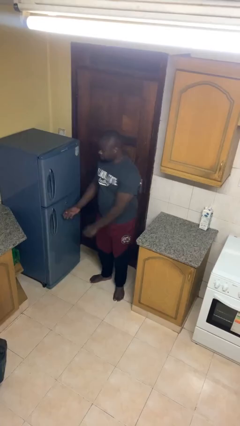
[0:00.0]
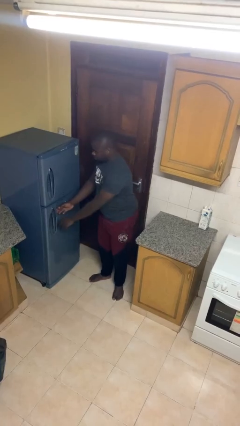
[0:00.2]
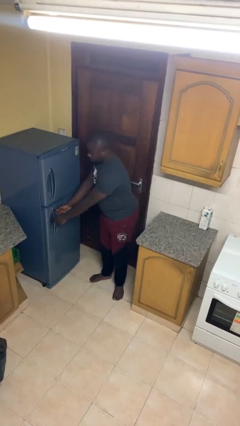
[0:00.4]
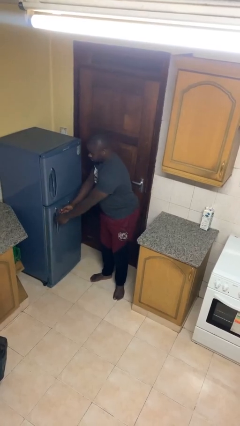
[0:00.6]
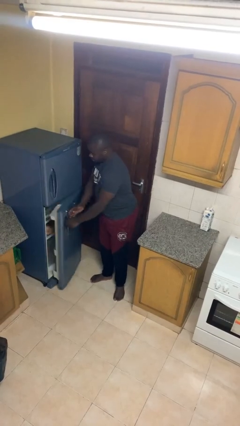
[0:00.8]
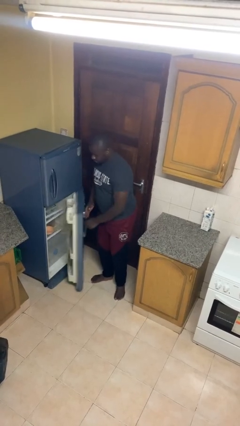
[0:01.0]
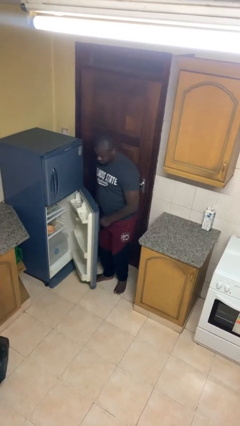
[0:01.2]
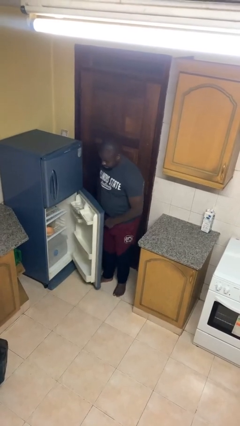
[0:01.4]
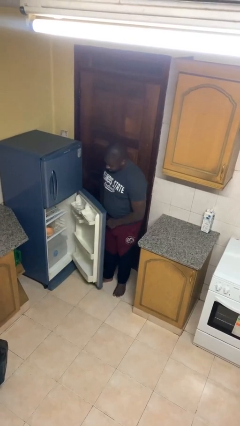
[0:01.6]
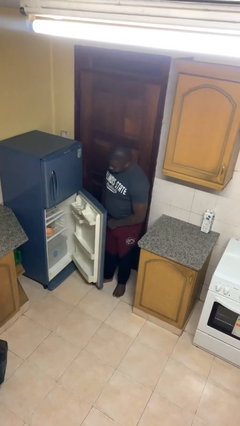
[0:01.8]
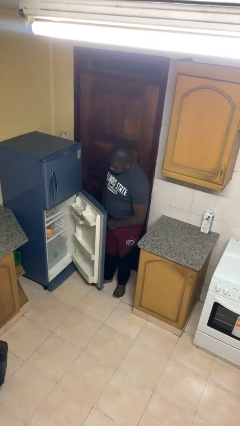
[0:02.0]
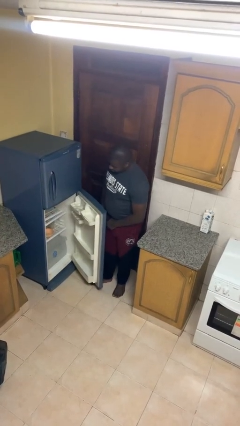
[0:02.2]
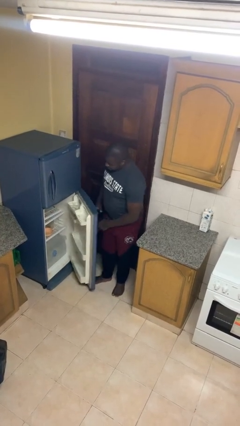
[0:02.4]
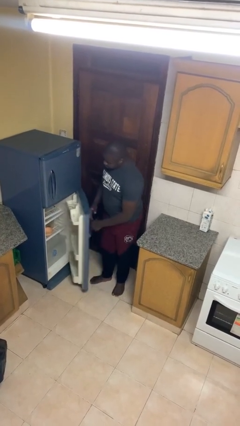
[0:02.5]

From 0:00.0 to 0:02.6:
person opens refrigerator

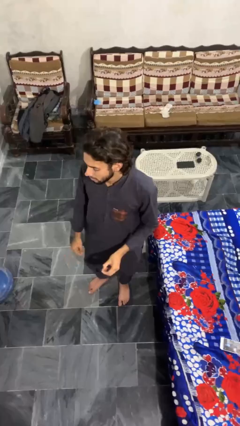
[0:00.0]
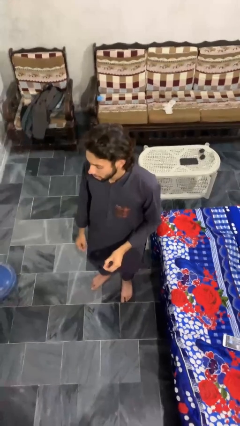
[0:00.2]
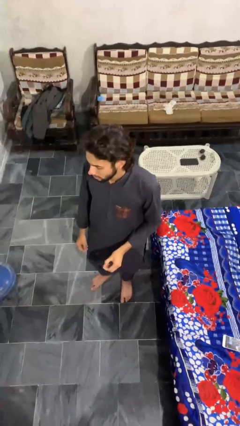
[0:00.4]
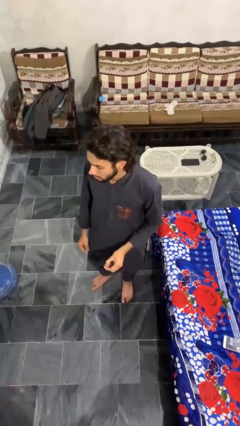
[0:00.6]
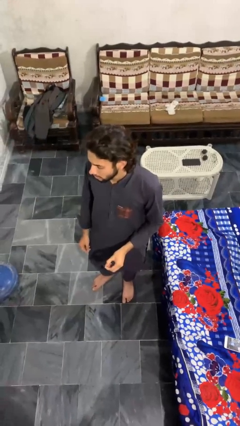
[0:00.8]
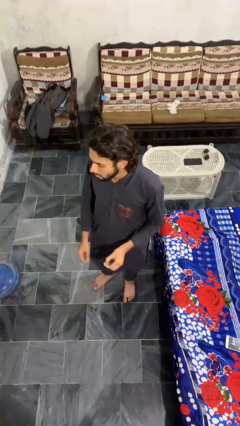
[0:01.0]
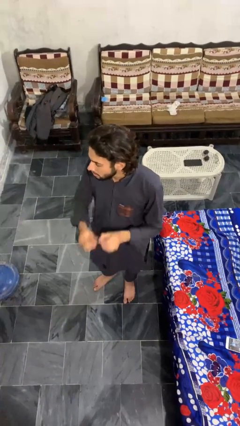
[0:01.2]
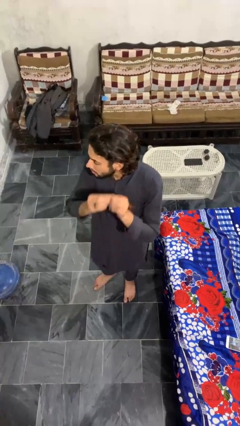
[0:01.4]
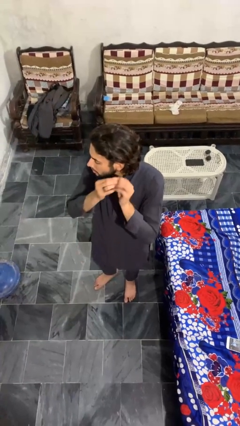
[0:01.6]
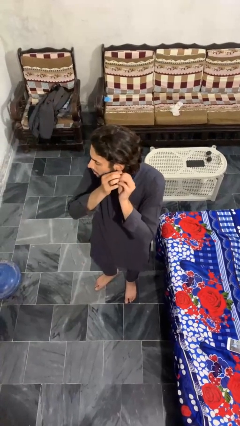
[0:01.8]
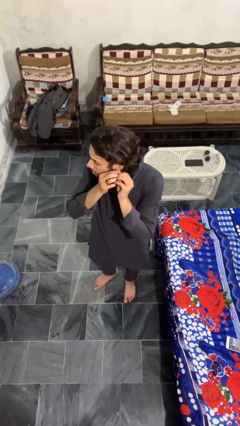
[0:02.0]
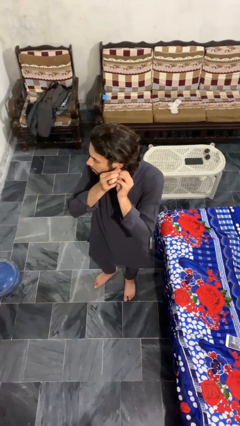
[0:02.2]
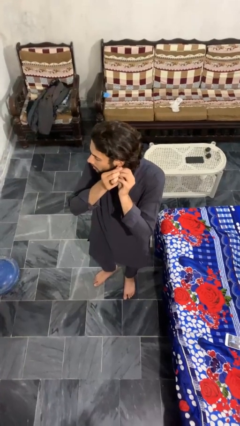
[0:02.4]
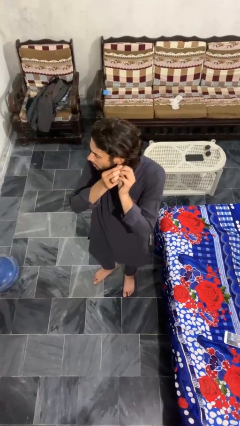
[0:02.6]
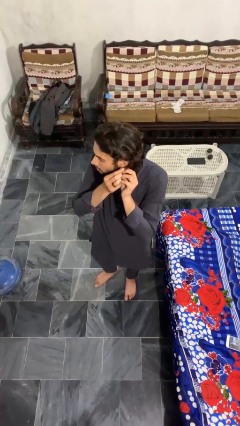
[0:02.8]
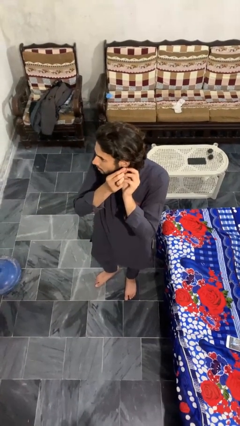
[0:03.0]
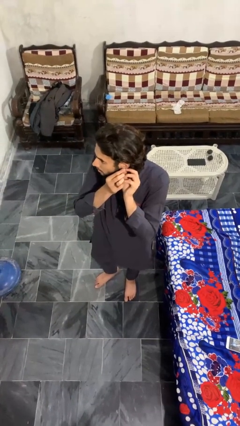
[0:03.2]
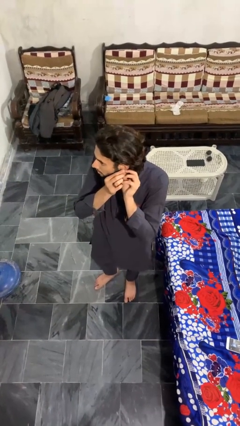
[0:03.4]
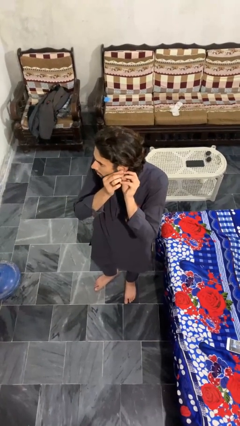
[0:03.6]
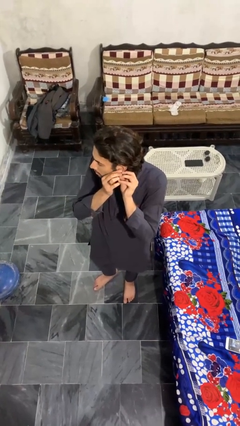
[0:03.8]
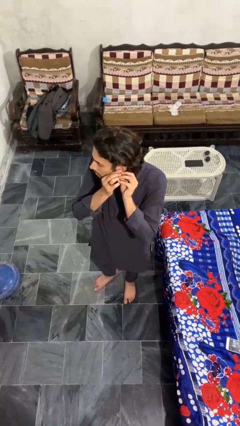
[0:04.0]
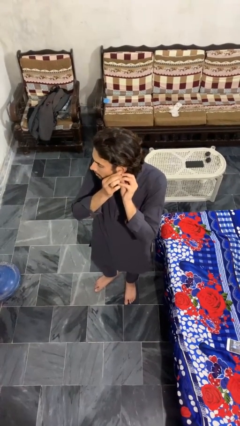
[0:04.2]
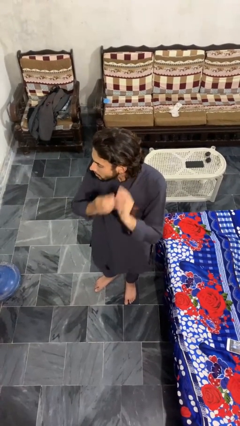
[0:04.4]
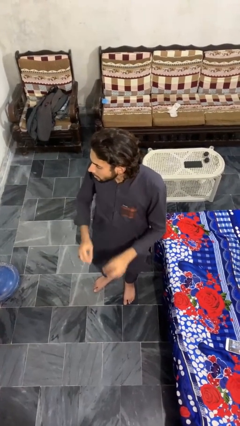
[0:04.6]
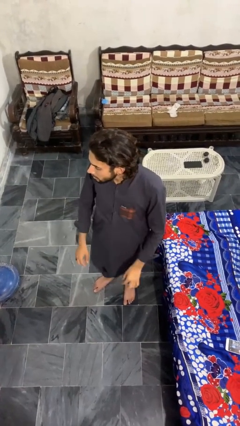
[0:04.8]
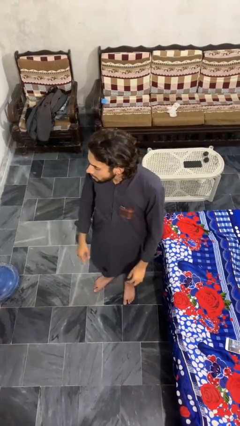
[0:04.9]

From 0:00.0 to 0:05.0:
person puts on earrings

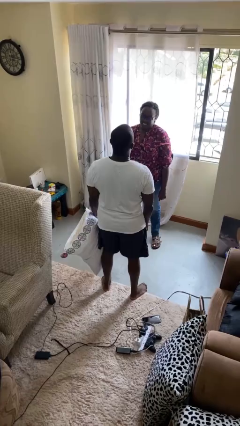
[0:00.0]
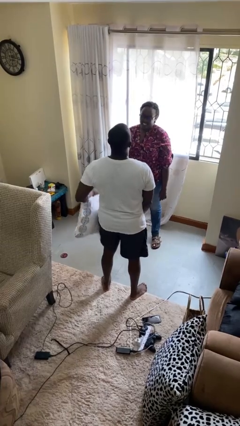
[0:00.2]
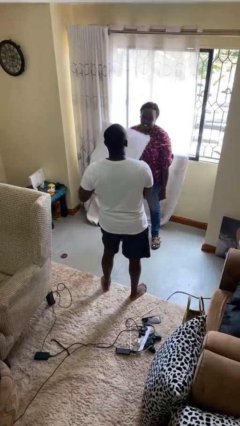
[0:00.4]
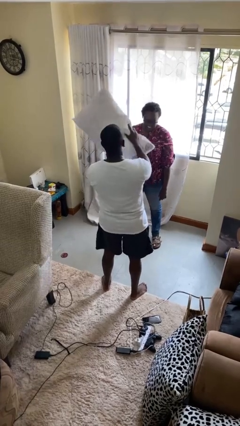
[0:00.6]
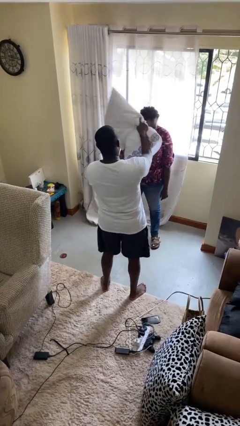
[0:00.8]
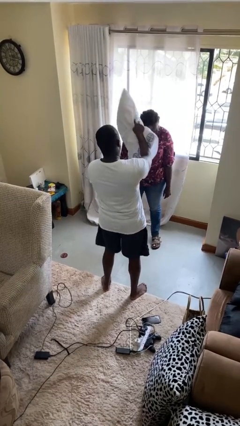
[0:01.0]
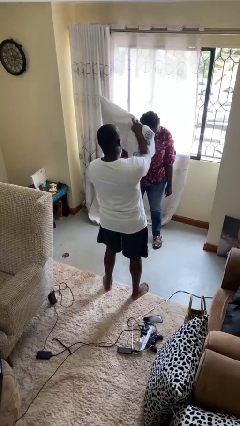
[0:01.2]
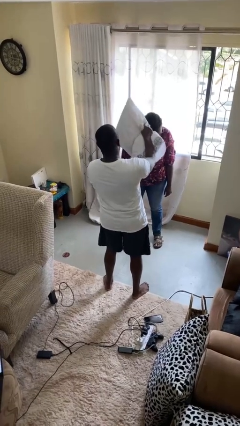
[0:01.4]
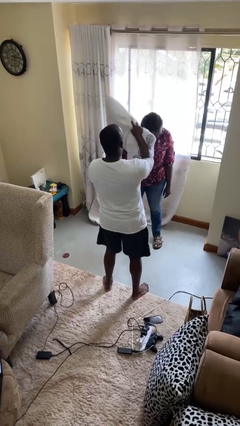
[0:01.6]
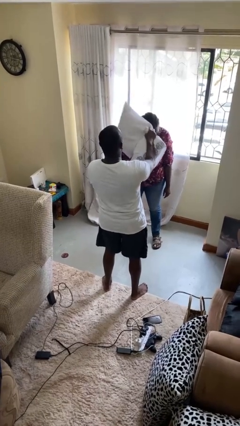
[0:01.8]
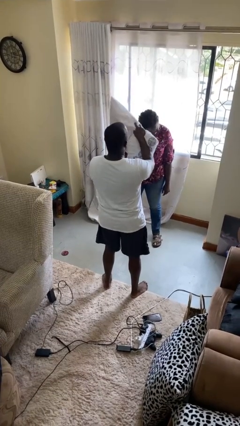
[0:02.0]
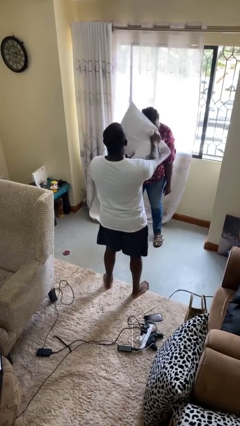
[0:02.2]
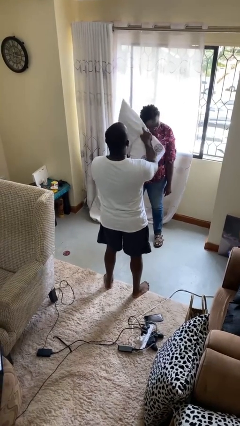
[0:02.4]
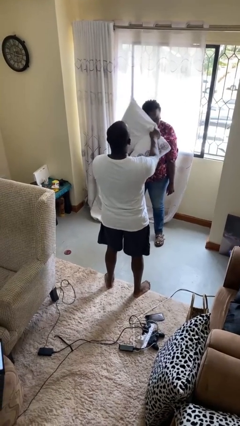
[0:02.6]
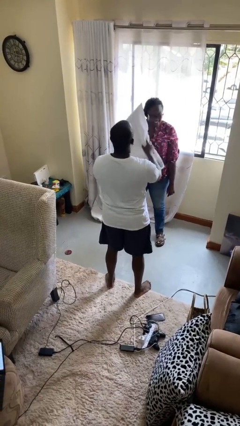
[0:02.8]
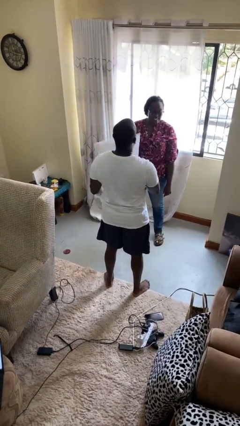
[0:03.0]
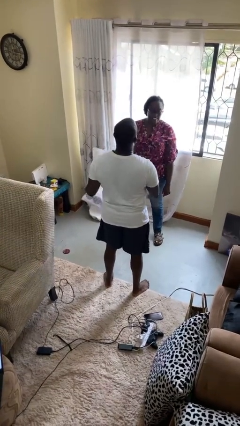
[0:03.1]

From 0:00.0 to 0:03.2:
person hits person with pillow

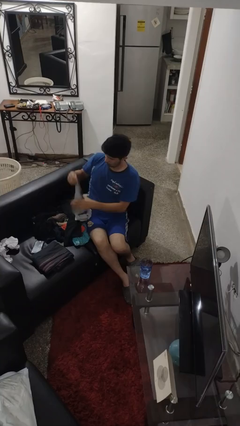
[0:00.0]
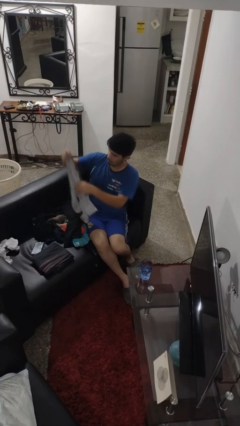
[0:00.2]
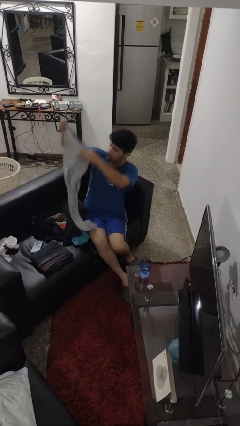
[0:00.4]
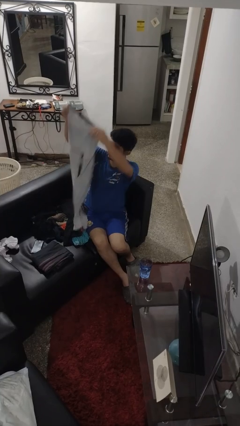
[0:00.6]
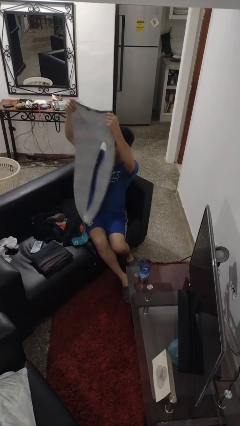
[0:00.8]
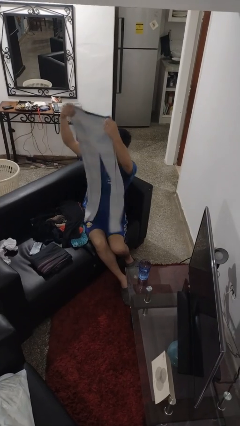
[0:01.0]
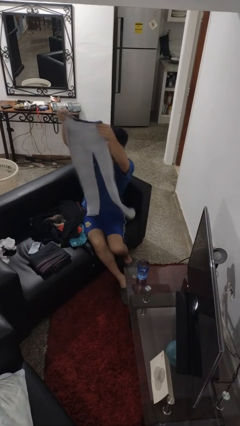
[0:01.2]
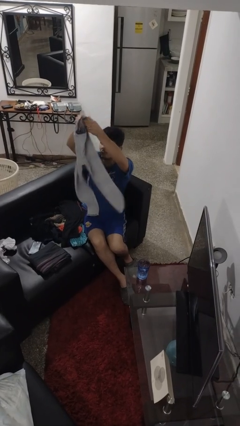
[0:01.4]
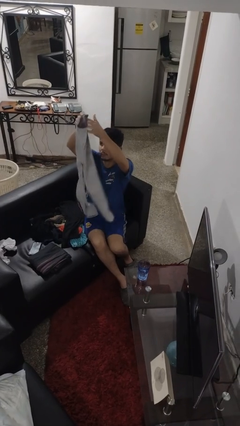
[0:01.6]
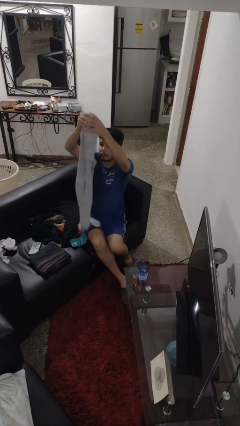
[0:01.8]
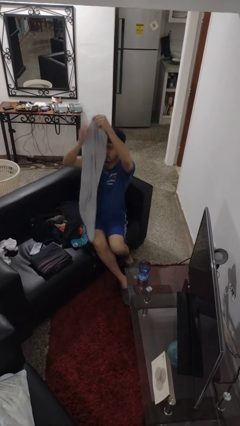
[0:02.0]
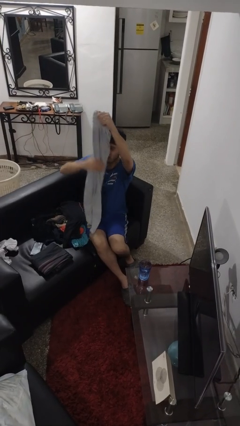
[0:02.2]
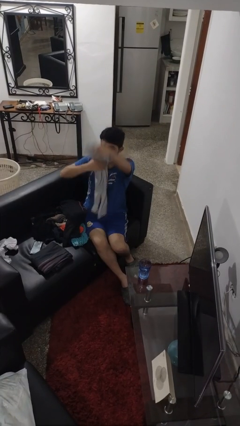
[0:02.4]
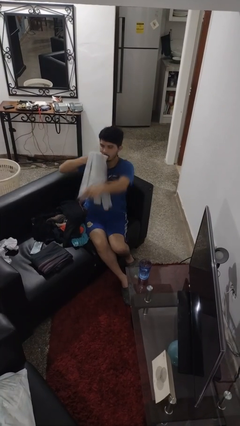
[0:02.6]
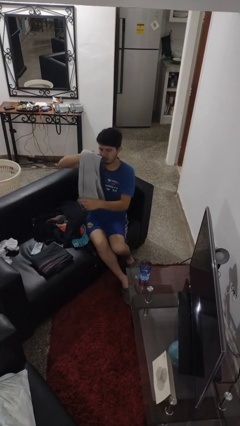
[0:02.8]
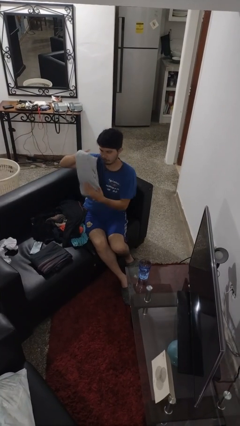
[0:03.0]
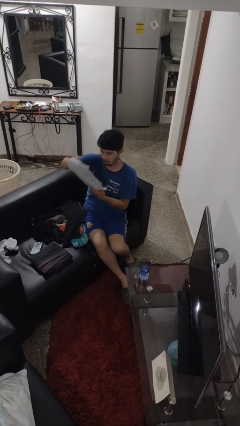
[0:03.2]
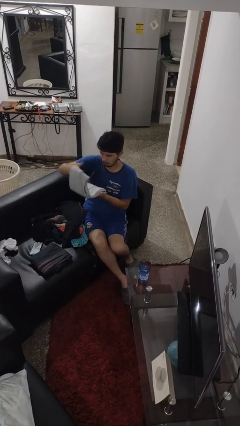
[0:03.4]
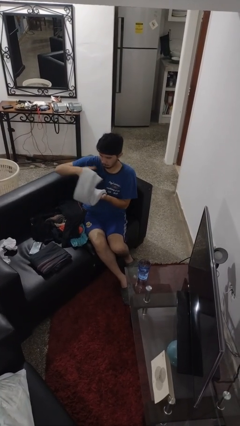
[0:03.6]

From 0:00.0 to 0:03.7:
person folds pants

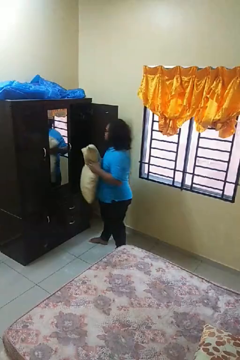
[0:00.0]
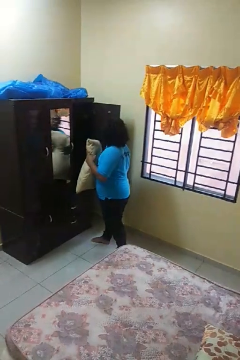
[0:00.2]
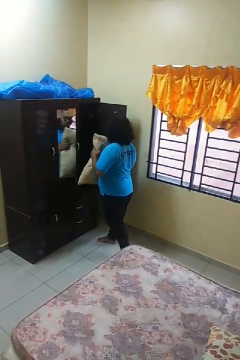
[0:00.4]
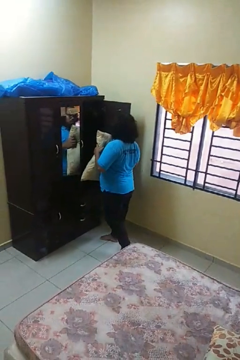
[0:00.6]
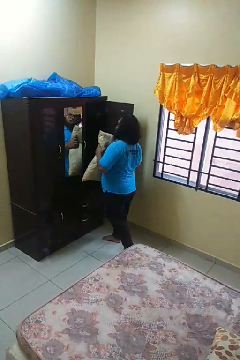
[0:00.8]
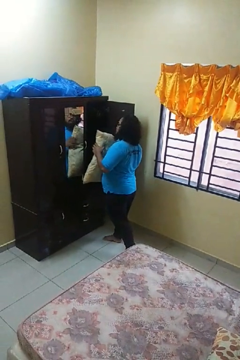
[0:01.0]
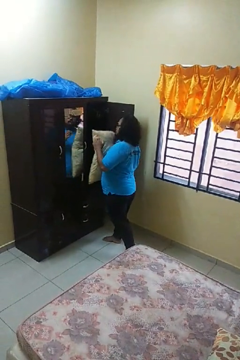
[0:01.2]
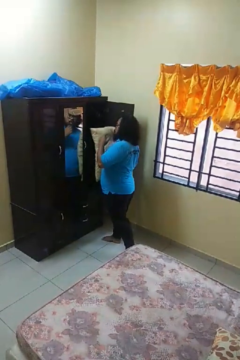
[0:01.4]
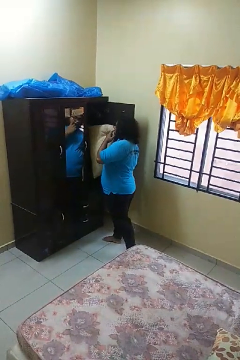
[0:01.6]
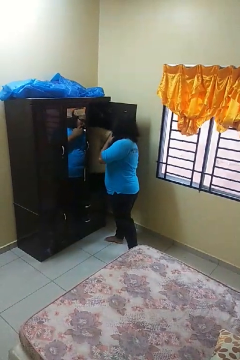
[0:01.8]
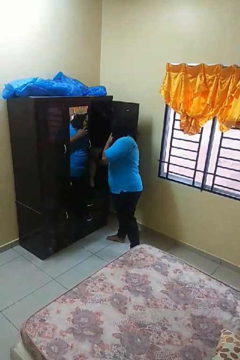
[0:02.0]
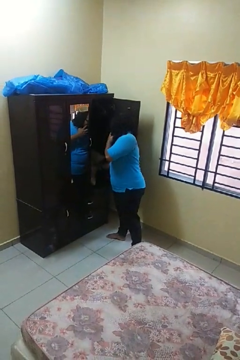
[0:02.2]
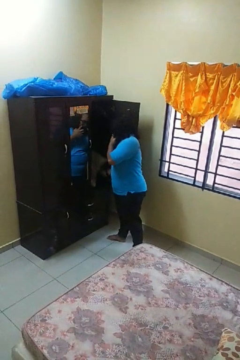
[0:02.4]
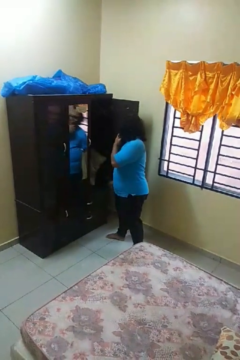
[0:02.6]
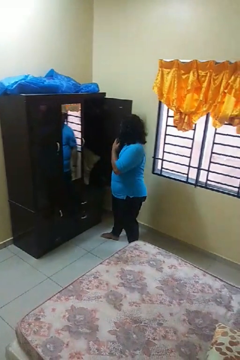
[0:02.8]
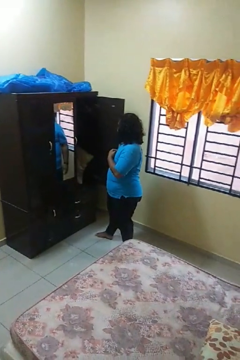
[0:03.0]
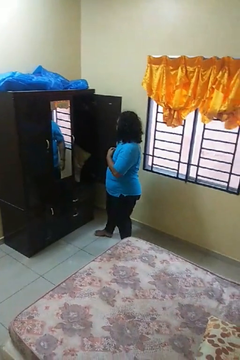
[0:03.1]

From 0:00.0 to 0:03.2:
person puts down object into cabinet

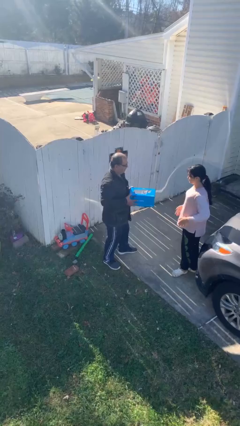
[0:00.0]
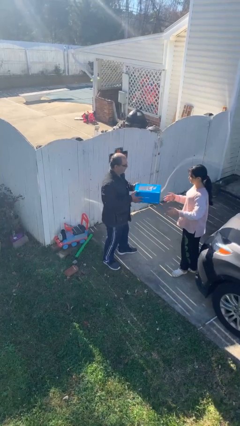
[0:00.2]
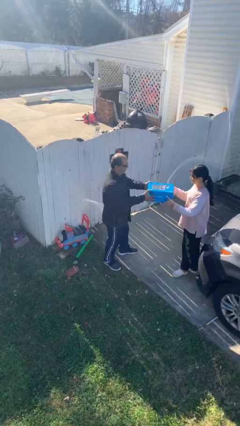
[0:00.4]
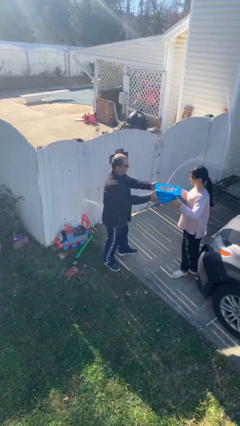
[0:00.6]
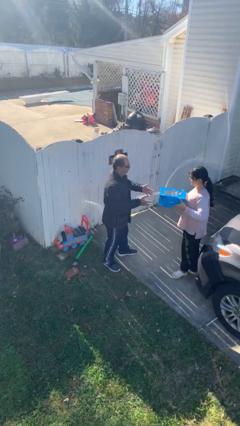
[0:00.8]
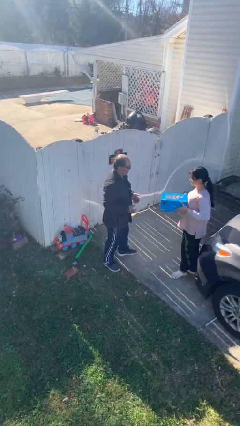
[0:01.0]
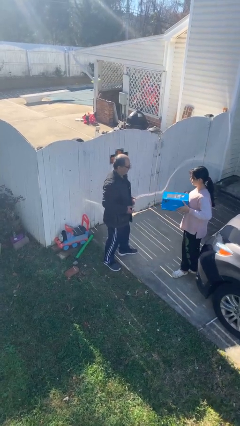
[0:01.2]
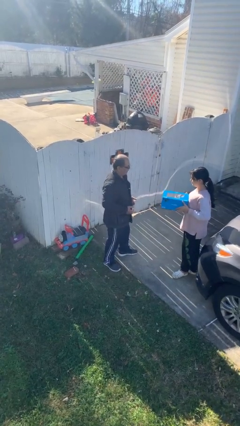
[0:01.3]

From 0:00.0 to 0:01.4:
person transfers object to person
